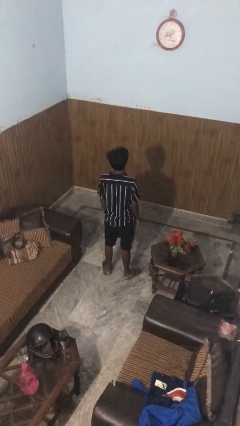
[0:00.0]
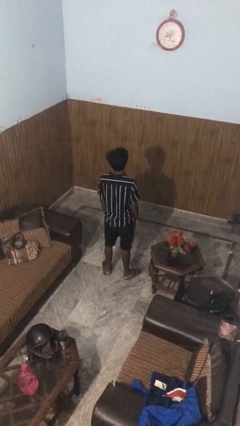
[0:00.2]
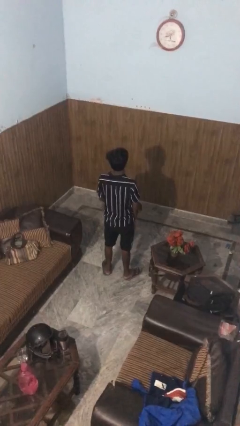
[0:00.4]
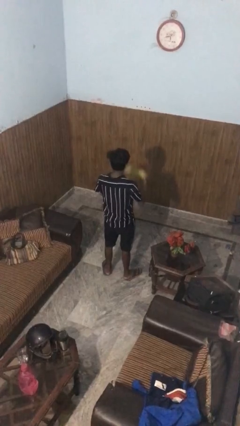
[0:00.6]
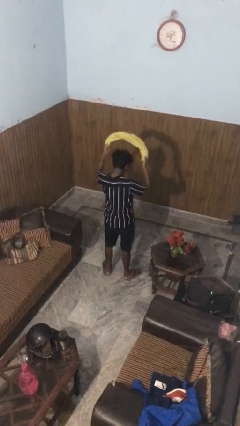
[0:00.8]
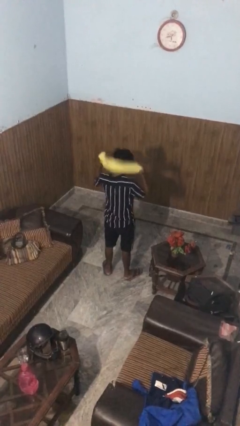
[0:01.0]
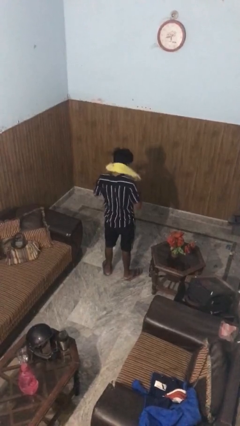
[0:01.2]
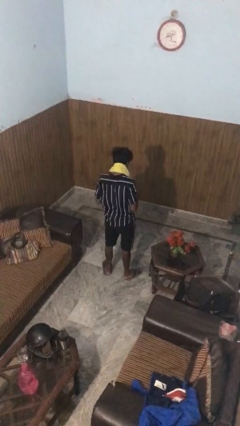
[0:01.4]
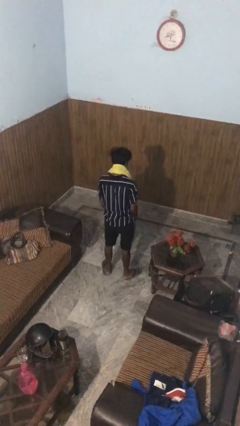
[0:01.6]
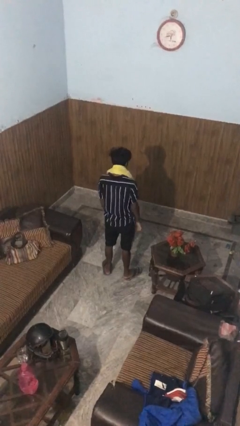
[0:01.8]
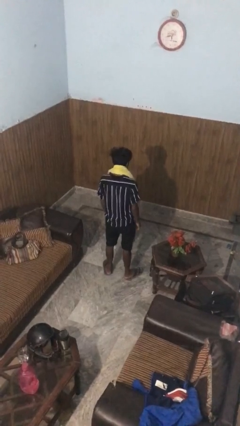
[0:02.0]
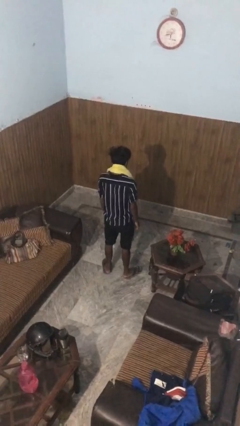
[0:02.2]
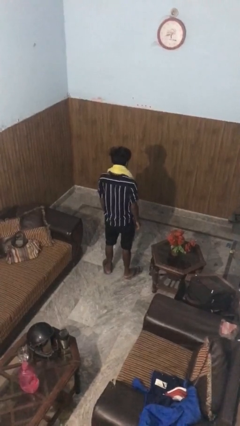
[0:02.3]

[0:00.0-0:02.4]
person puts on scarf

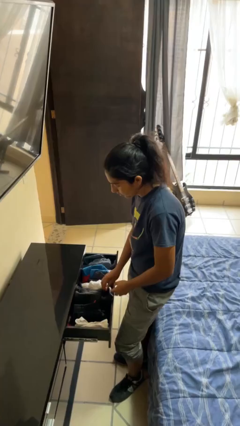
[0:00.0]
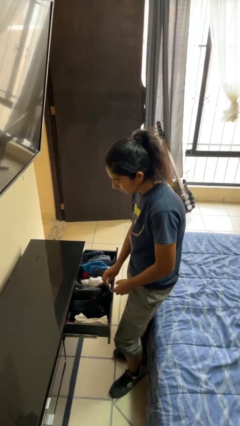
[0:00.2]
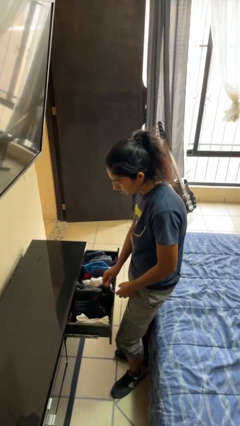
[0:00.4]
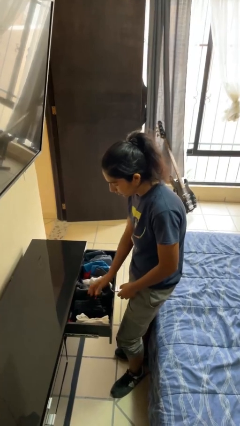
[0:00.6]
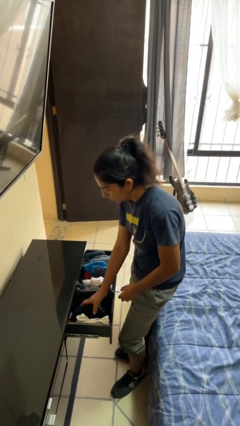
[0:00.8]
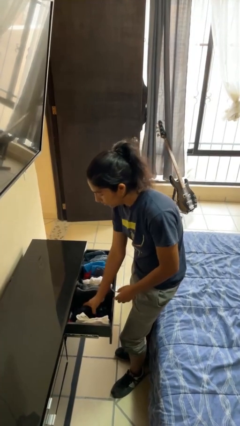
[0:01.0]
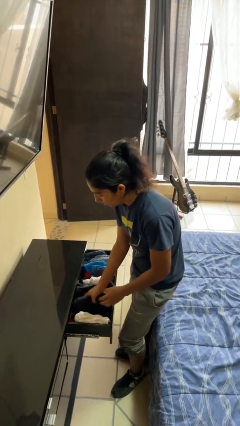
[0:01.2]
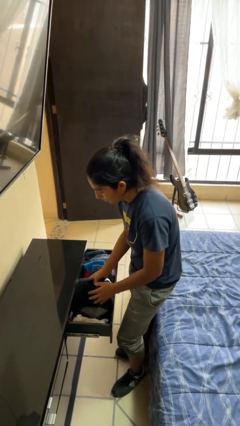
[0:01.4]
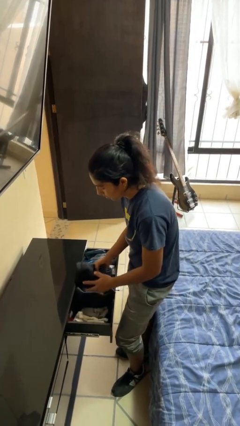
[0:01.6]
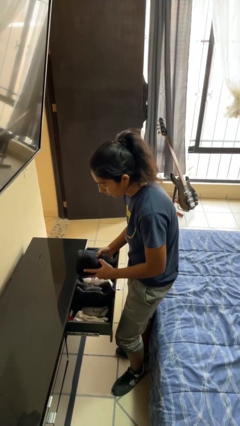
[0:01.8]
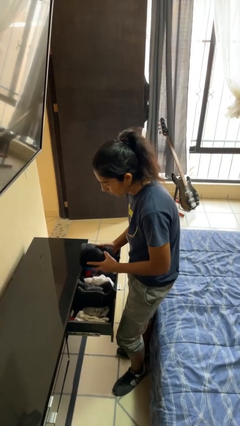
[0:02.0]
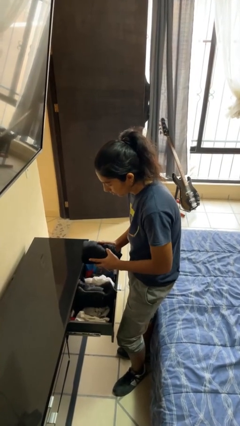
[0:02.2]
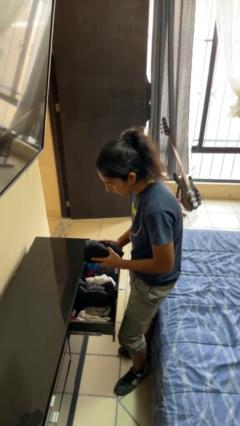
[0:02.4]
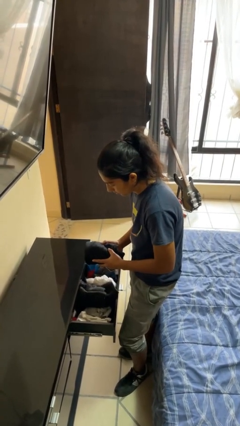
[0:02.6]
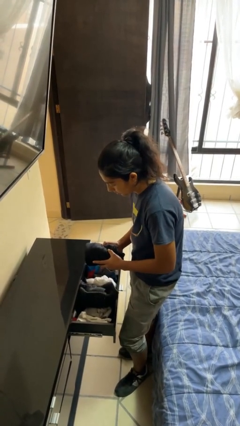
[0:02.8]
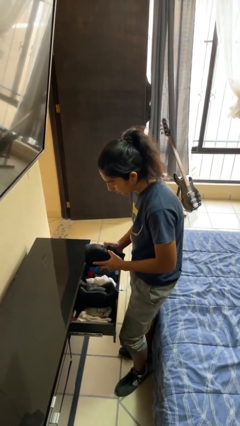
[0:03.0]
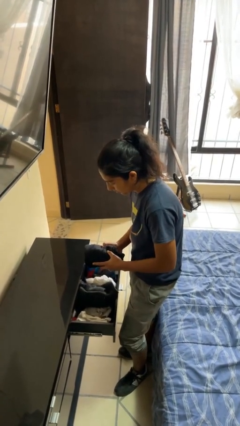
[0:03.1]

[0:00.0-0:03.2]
person takes clothes from dresser

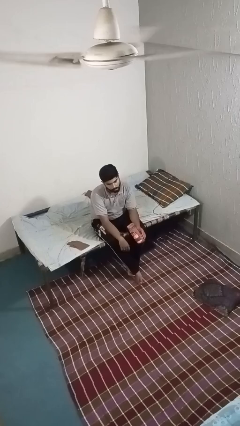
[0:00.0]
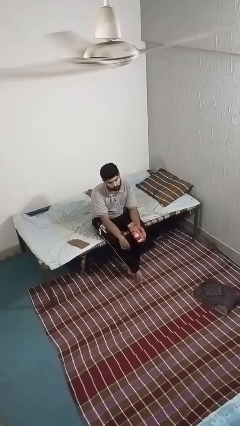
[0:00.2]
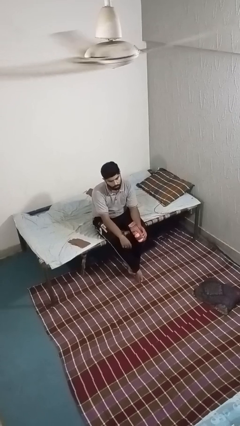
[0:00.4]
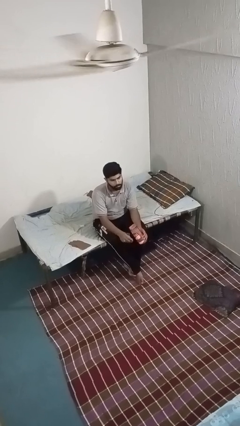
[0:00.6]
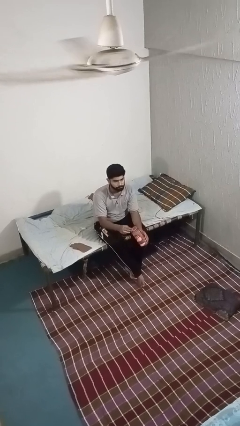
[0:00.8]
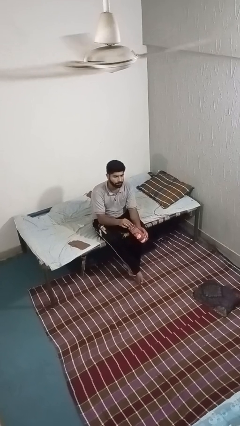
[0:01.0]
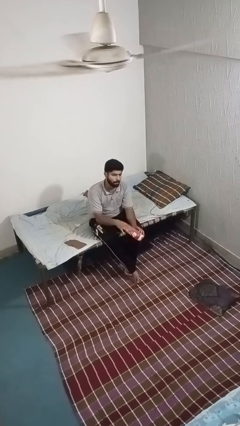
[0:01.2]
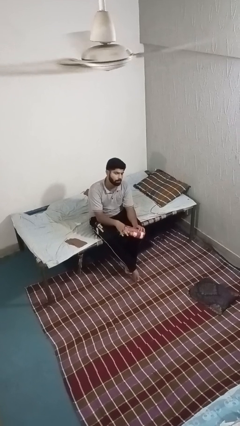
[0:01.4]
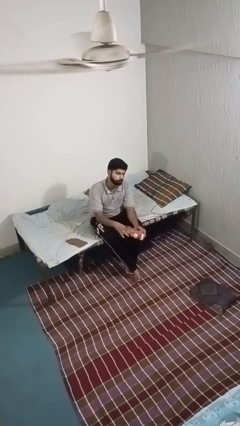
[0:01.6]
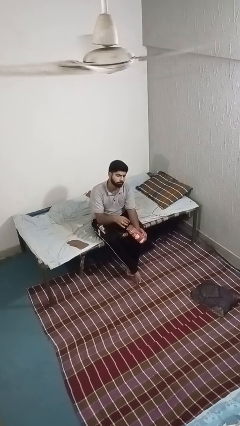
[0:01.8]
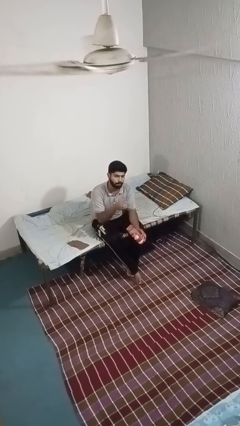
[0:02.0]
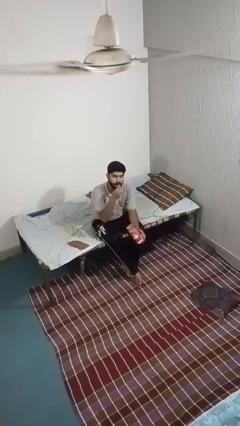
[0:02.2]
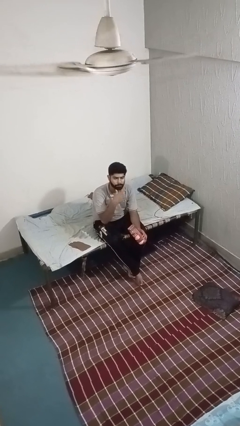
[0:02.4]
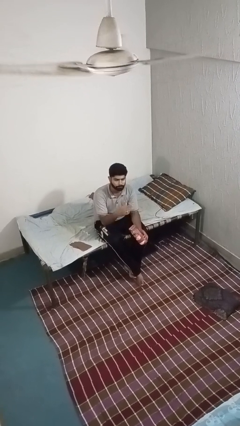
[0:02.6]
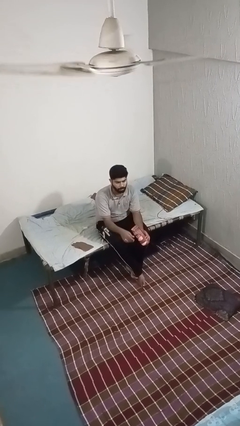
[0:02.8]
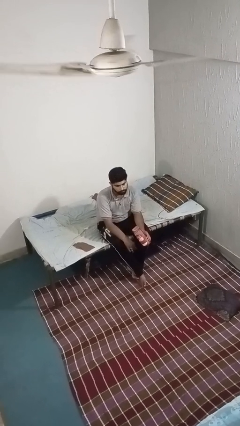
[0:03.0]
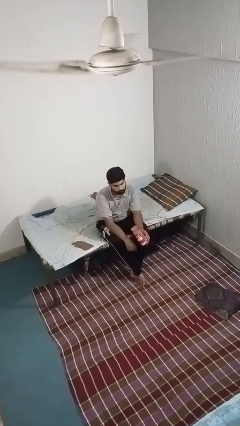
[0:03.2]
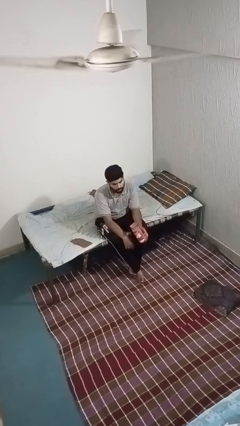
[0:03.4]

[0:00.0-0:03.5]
person eats snack from bag

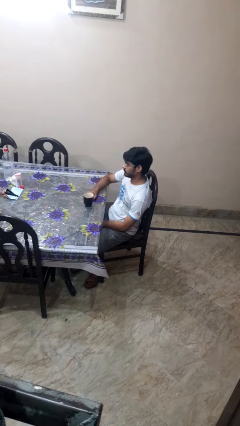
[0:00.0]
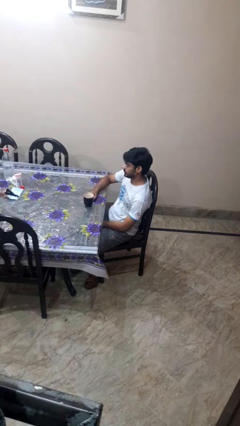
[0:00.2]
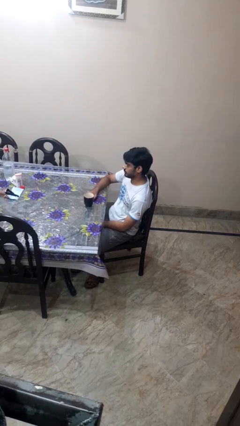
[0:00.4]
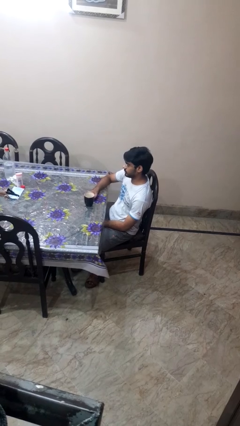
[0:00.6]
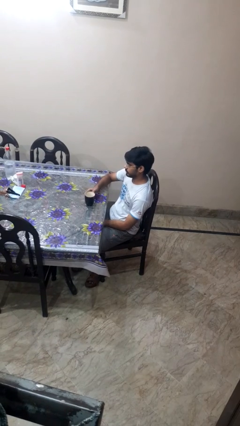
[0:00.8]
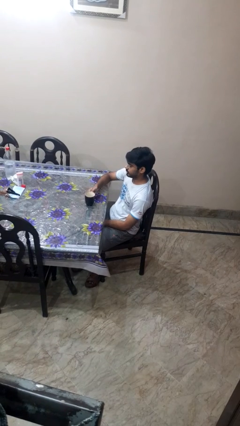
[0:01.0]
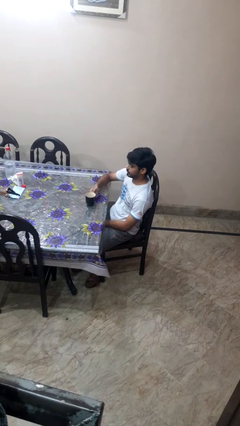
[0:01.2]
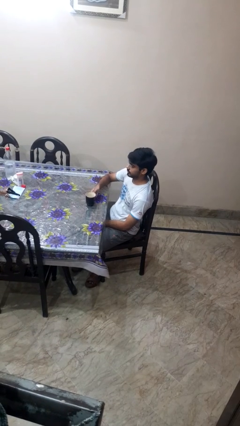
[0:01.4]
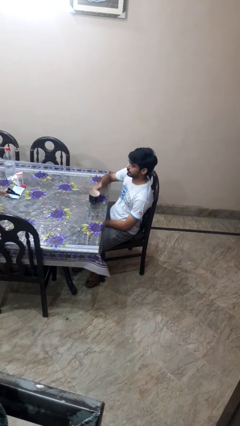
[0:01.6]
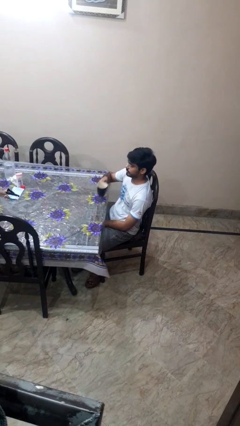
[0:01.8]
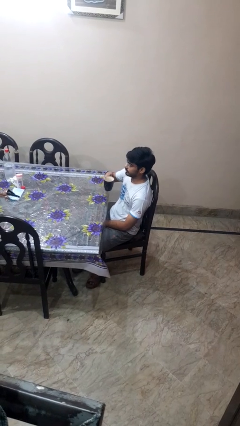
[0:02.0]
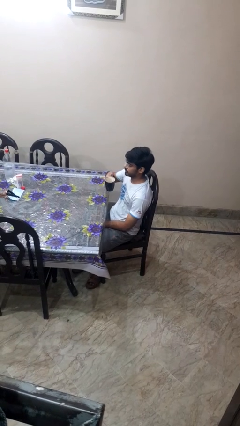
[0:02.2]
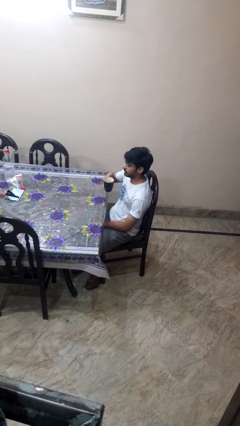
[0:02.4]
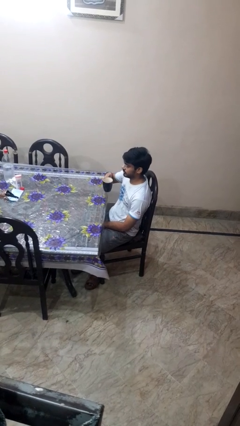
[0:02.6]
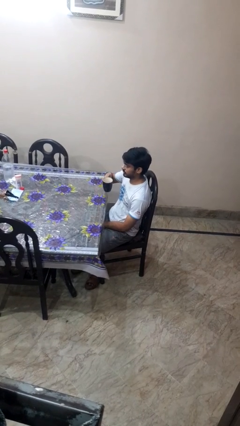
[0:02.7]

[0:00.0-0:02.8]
person picks up object from table

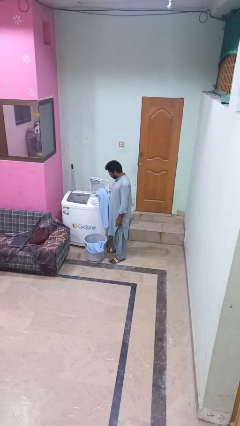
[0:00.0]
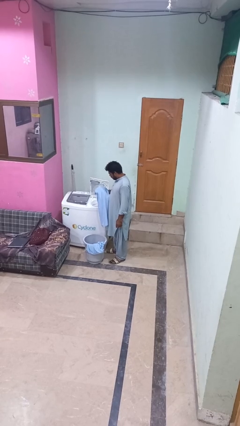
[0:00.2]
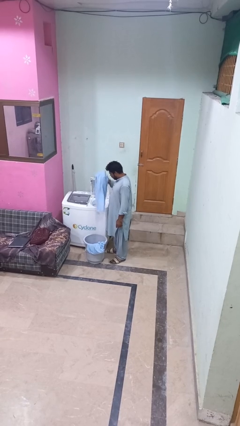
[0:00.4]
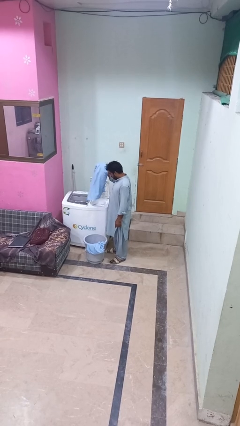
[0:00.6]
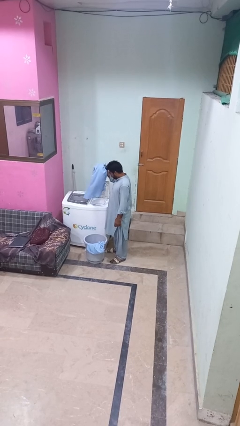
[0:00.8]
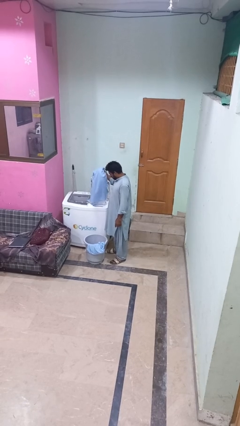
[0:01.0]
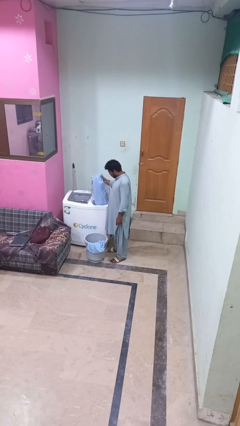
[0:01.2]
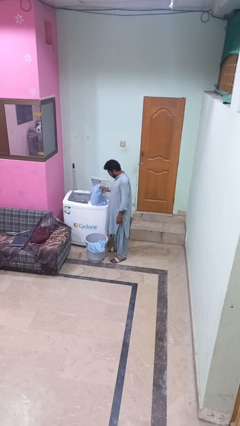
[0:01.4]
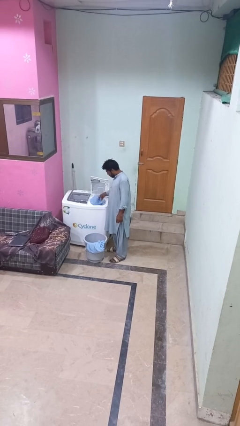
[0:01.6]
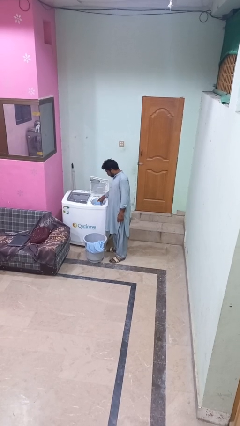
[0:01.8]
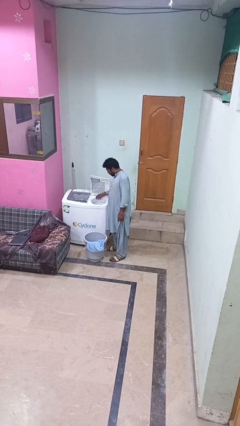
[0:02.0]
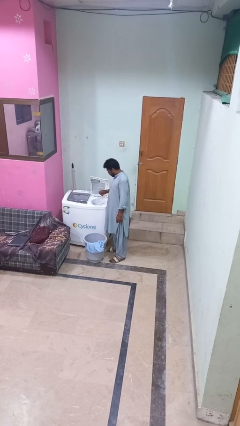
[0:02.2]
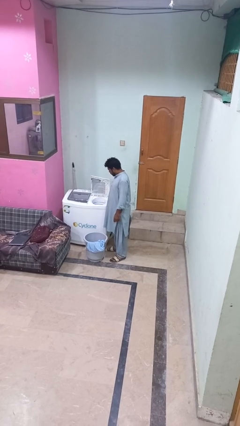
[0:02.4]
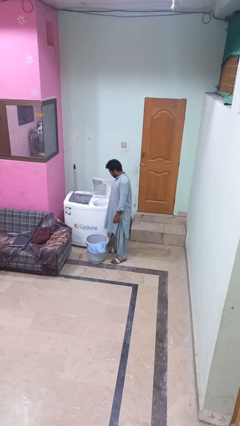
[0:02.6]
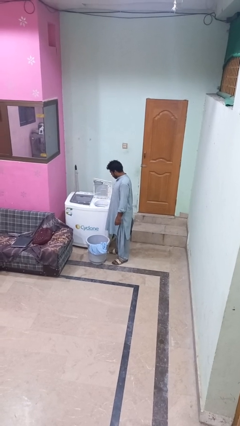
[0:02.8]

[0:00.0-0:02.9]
person loads dryer

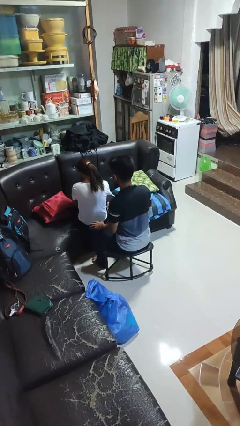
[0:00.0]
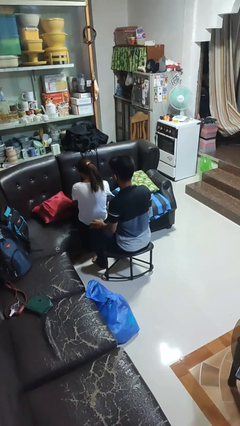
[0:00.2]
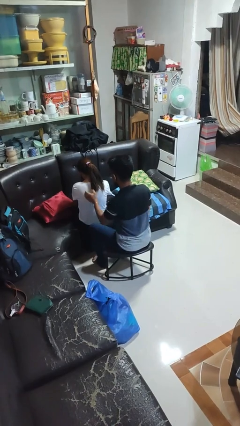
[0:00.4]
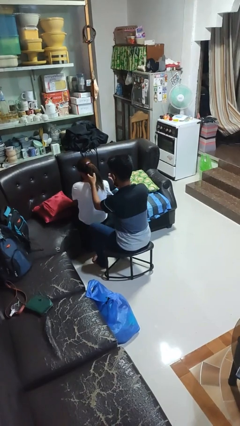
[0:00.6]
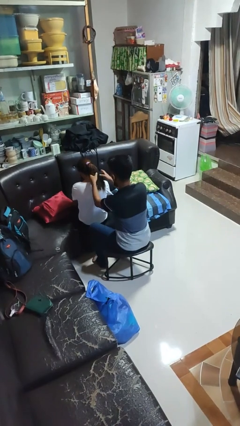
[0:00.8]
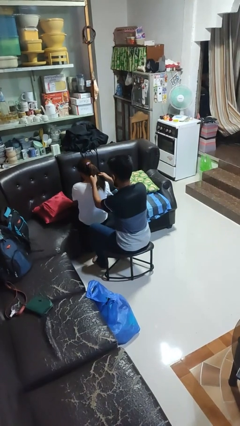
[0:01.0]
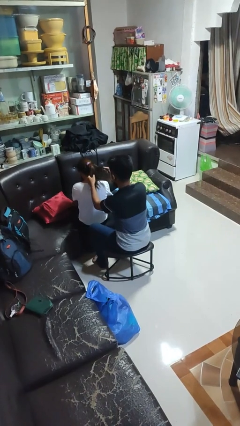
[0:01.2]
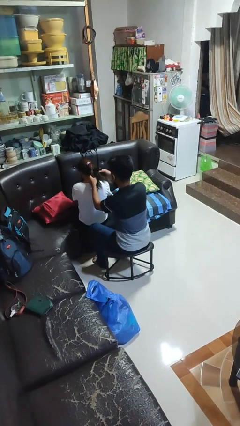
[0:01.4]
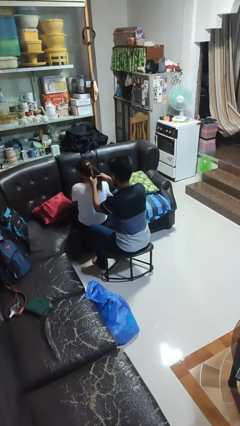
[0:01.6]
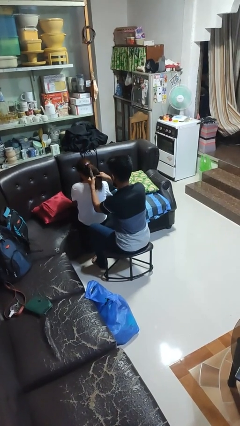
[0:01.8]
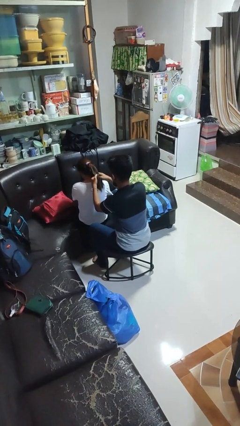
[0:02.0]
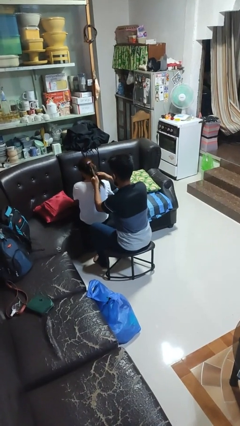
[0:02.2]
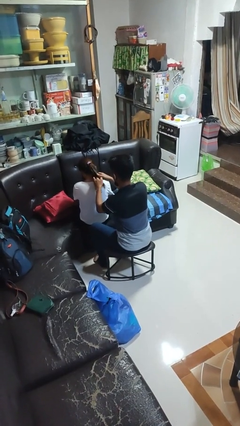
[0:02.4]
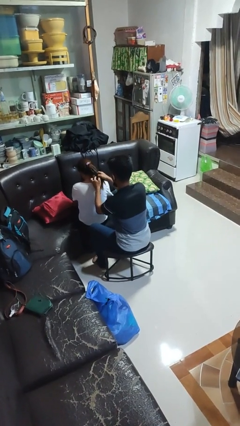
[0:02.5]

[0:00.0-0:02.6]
person braids hair of person

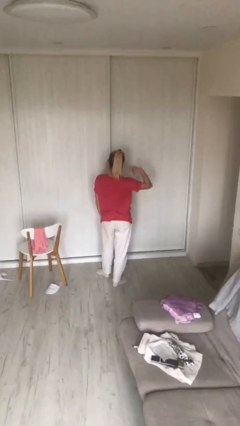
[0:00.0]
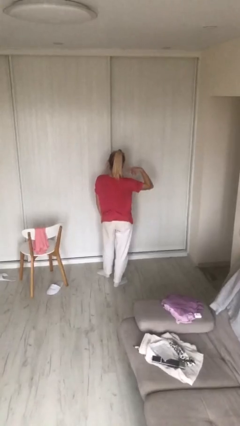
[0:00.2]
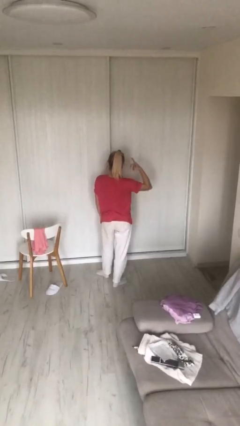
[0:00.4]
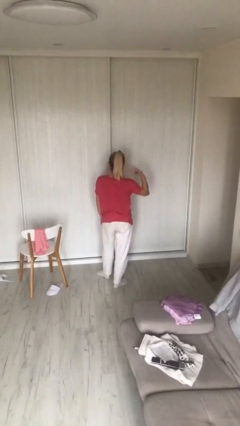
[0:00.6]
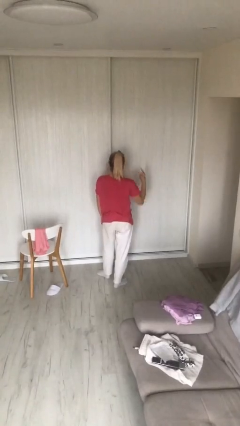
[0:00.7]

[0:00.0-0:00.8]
person gestures listen closely
